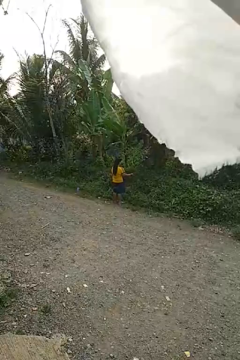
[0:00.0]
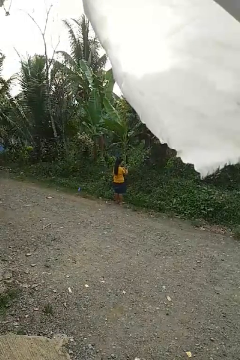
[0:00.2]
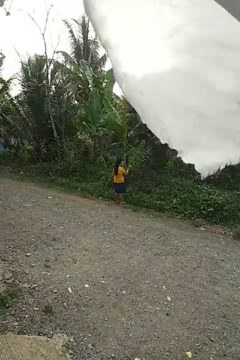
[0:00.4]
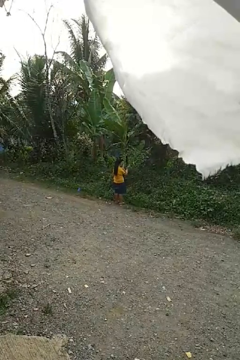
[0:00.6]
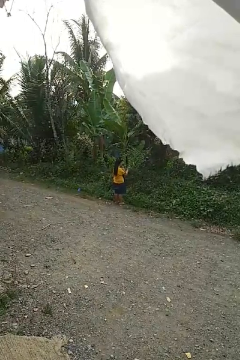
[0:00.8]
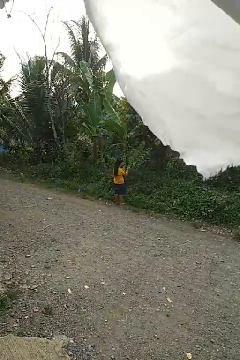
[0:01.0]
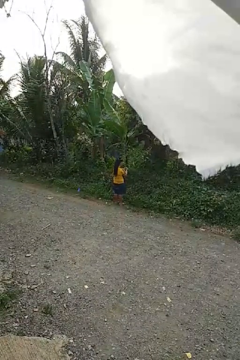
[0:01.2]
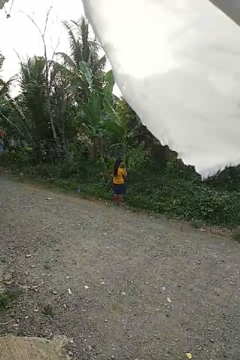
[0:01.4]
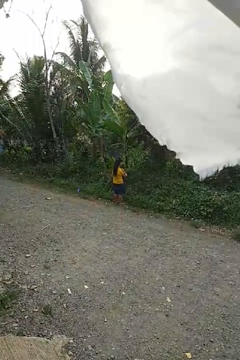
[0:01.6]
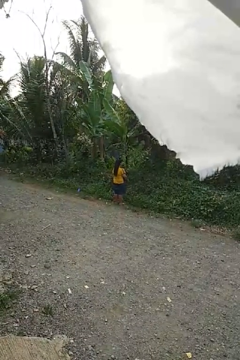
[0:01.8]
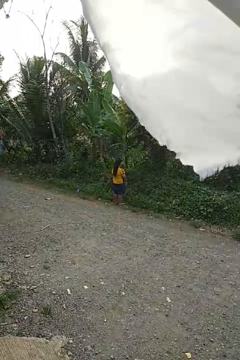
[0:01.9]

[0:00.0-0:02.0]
person claps hands

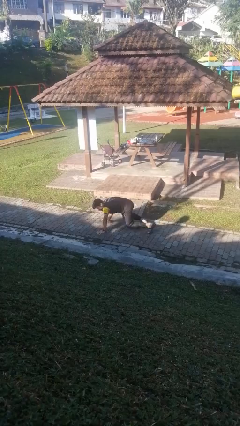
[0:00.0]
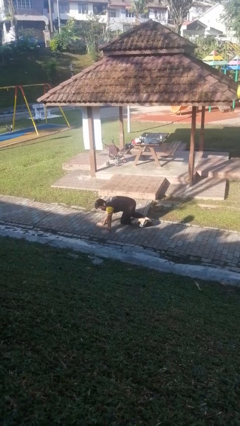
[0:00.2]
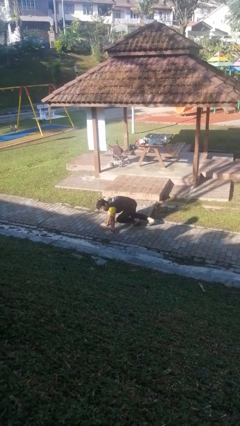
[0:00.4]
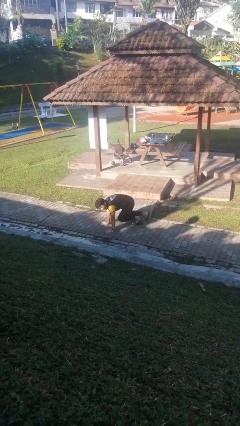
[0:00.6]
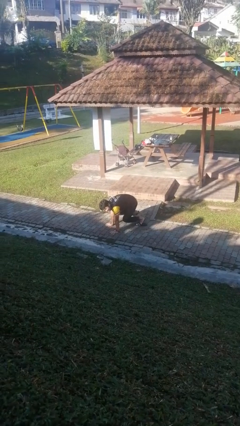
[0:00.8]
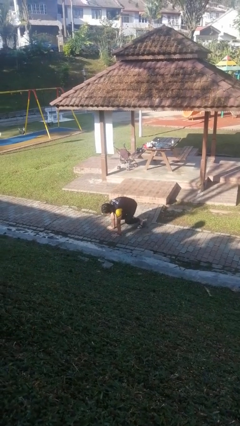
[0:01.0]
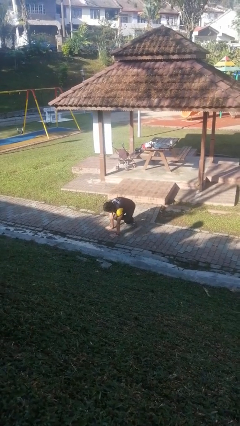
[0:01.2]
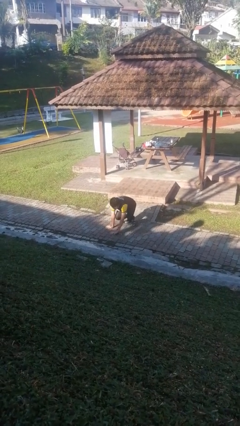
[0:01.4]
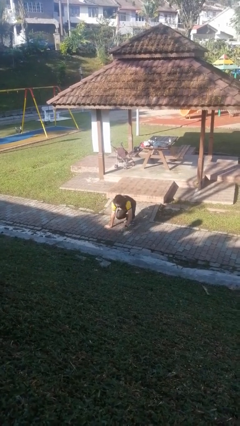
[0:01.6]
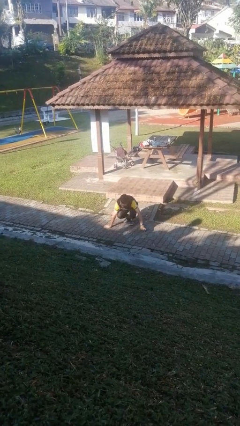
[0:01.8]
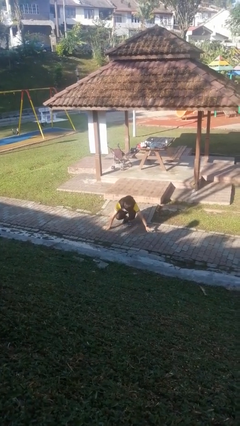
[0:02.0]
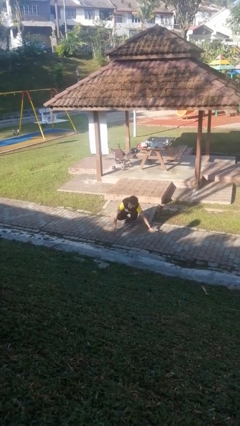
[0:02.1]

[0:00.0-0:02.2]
person crawls

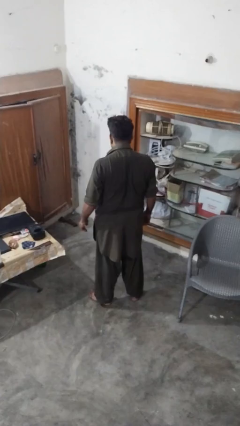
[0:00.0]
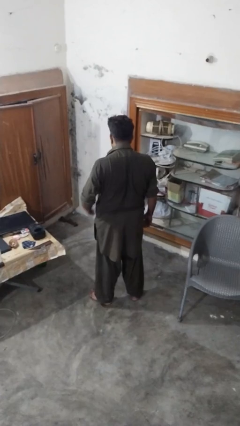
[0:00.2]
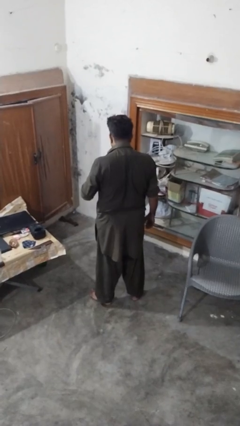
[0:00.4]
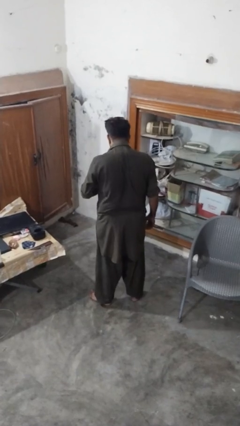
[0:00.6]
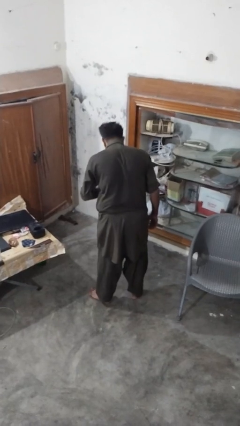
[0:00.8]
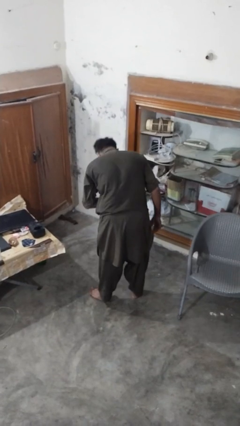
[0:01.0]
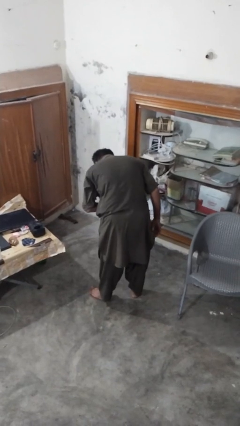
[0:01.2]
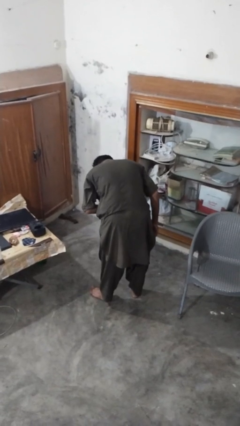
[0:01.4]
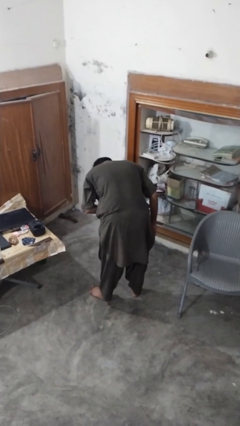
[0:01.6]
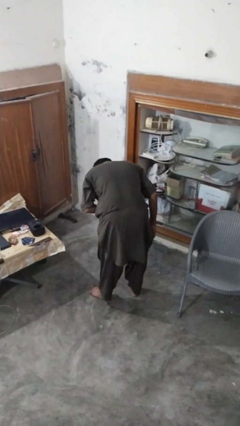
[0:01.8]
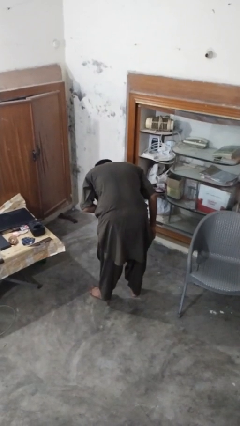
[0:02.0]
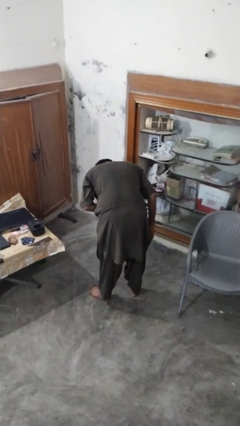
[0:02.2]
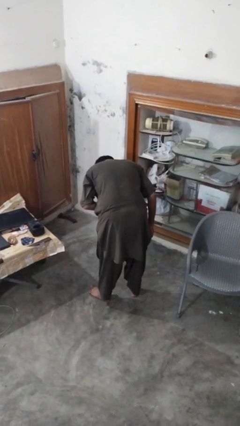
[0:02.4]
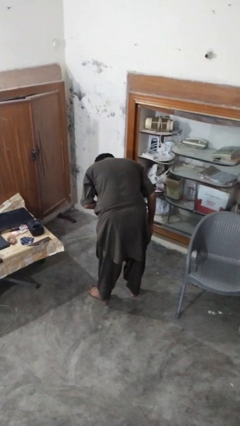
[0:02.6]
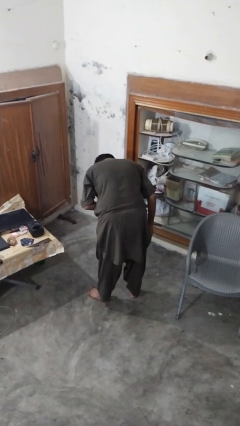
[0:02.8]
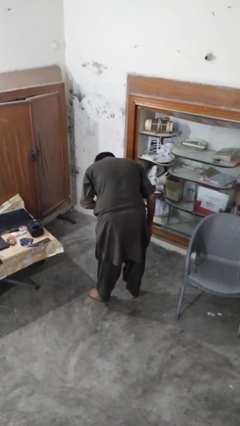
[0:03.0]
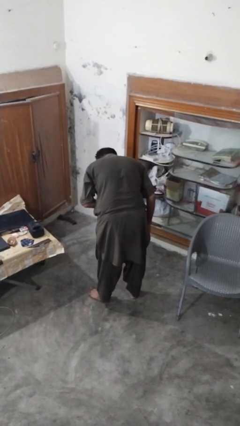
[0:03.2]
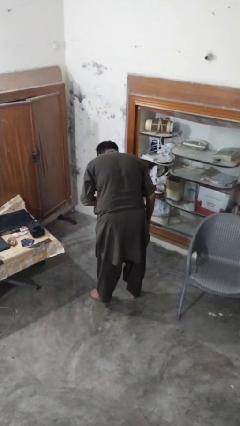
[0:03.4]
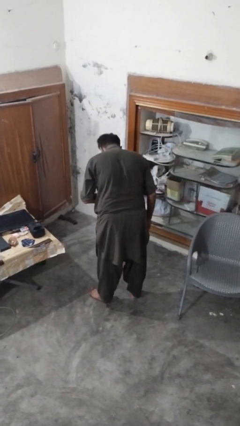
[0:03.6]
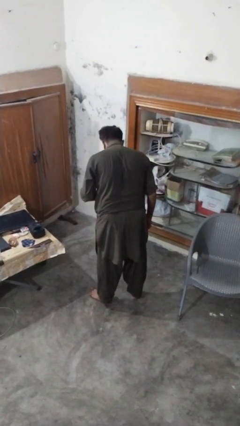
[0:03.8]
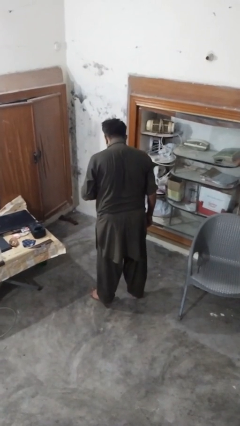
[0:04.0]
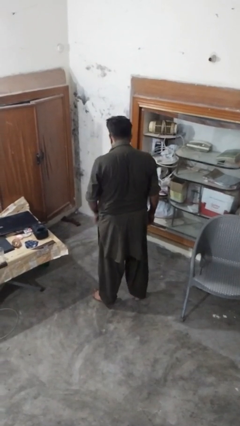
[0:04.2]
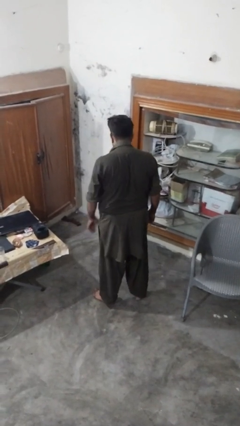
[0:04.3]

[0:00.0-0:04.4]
person bows

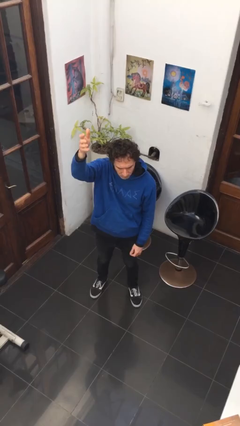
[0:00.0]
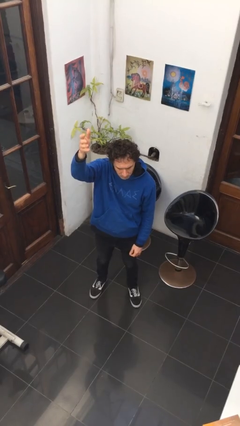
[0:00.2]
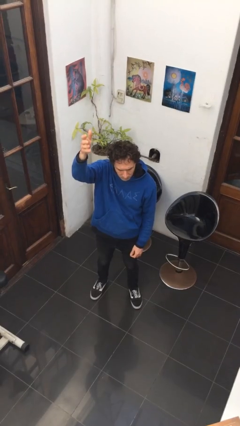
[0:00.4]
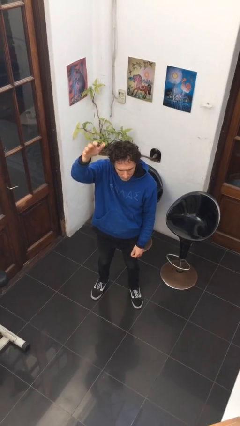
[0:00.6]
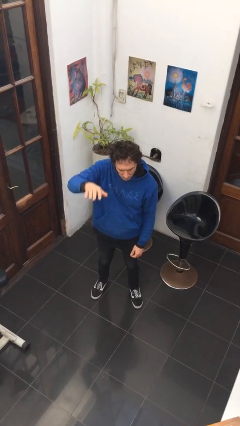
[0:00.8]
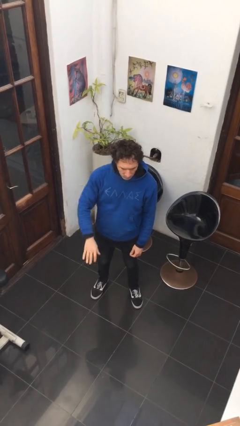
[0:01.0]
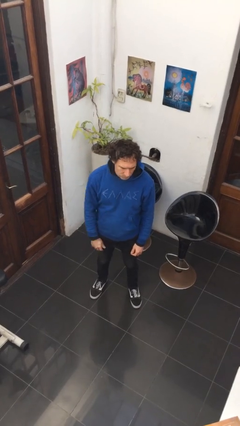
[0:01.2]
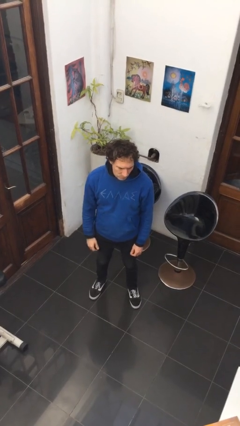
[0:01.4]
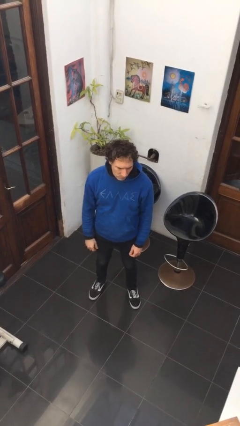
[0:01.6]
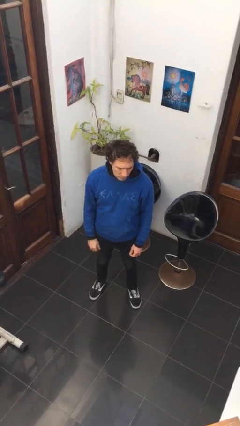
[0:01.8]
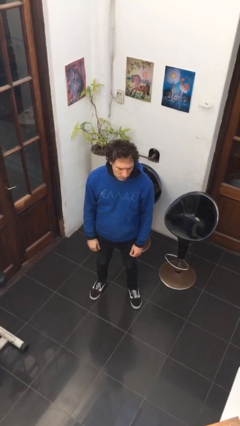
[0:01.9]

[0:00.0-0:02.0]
person gestures swipe down

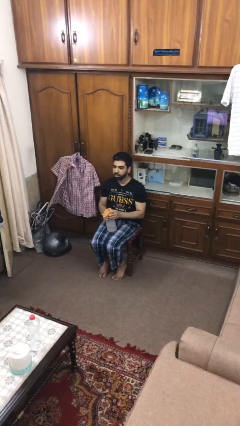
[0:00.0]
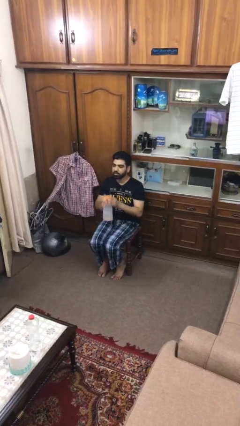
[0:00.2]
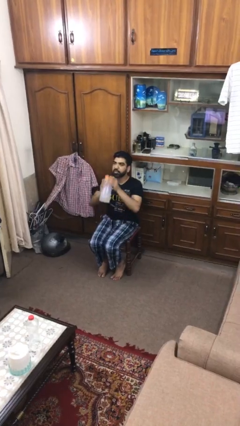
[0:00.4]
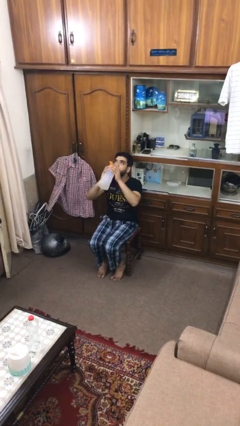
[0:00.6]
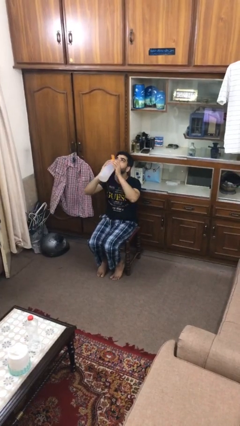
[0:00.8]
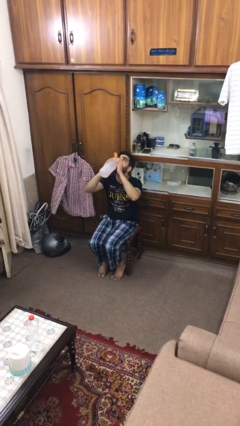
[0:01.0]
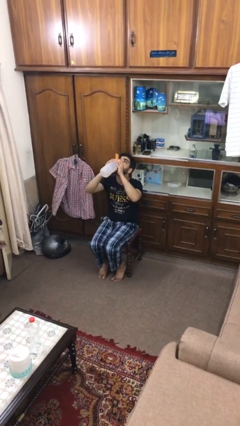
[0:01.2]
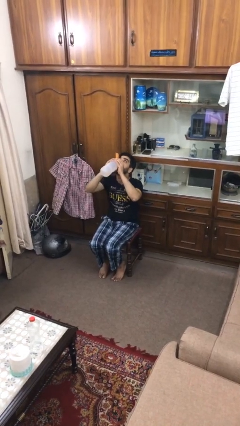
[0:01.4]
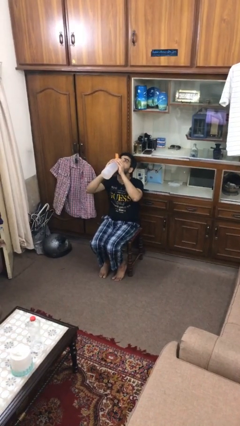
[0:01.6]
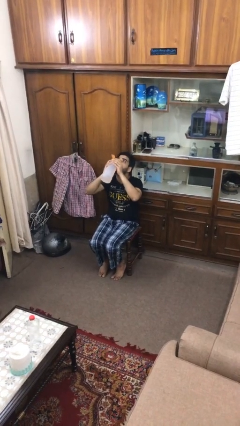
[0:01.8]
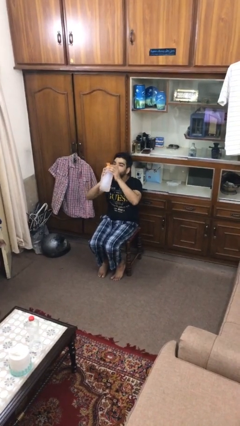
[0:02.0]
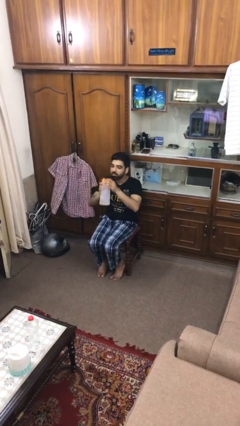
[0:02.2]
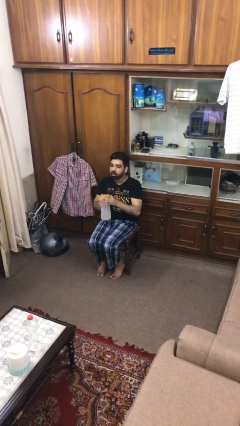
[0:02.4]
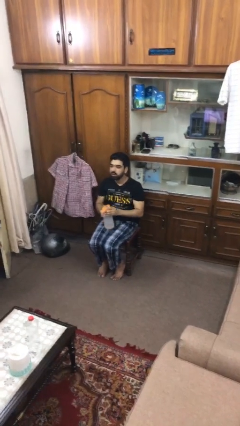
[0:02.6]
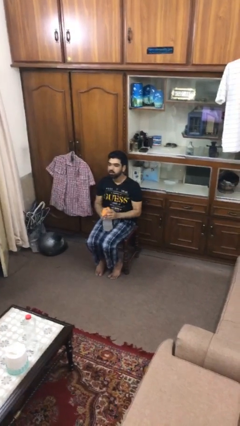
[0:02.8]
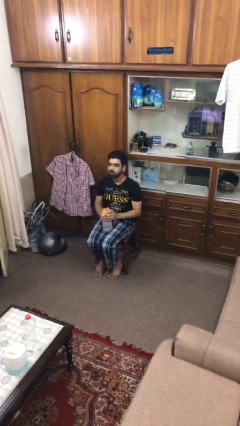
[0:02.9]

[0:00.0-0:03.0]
person drinks from bottle

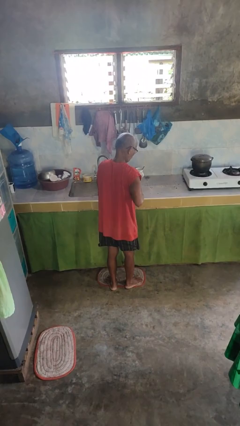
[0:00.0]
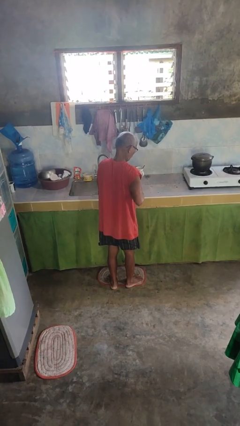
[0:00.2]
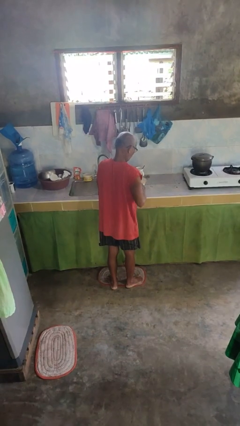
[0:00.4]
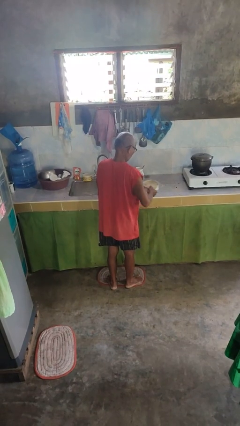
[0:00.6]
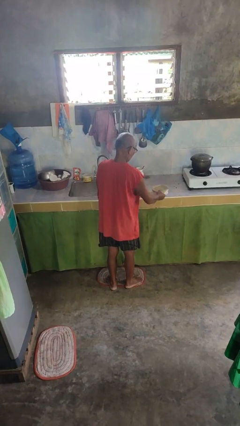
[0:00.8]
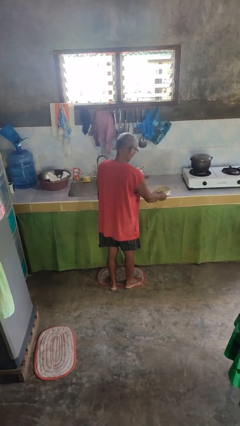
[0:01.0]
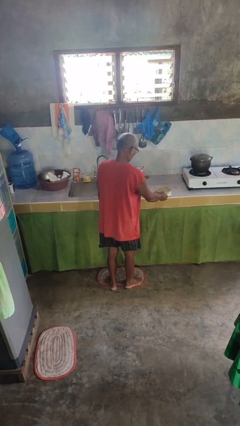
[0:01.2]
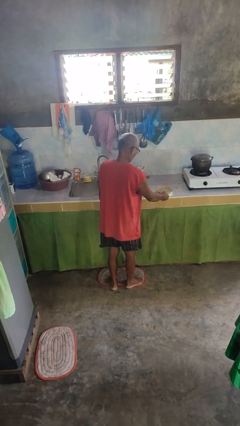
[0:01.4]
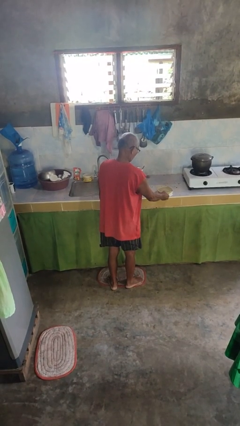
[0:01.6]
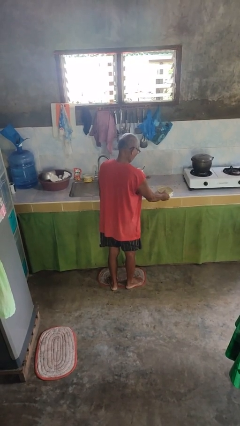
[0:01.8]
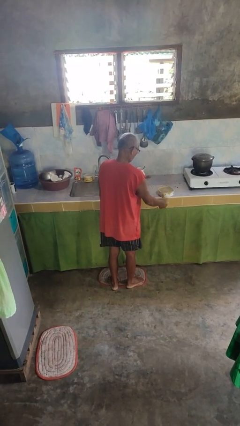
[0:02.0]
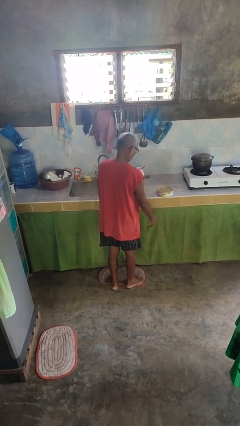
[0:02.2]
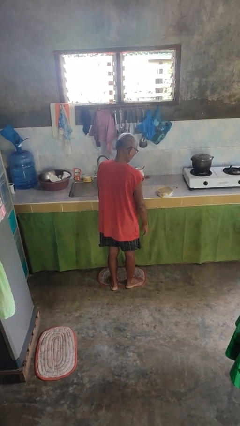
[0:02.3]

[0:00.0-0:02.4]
person puts down object on countertop

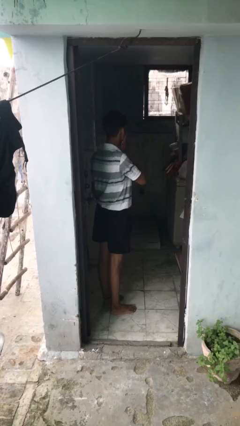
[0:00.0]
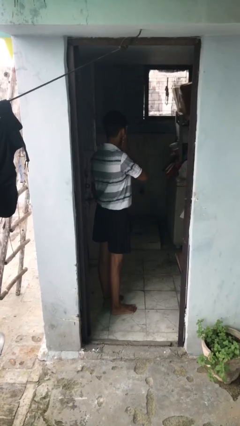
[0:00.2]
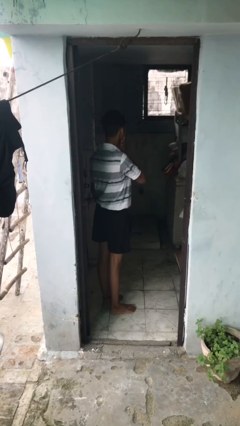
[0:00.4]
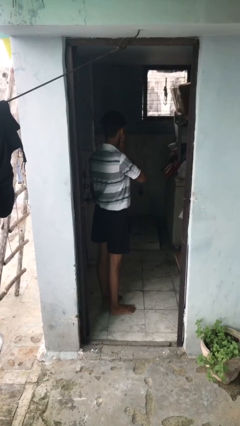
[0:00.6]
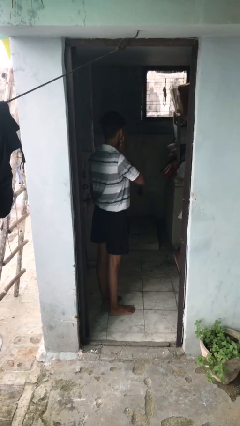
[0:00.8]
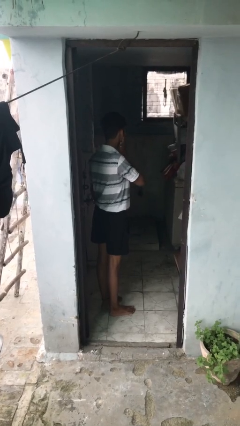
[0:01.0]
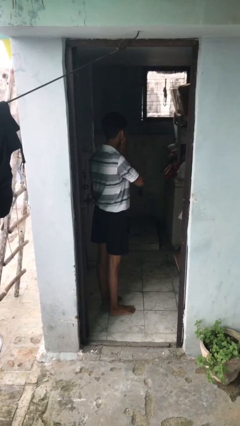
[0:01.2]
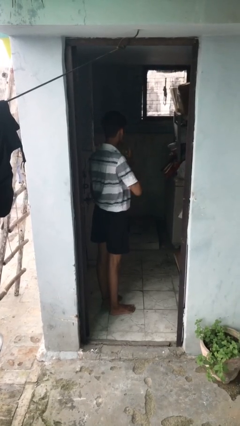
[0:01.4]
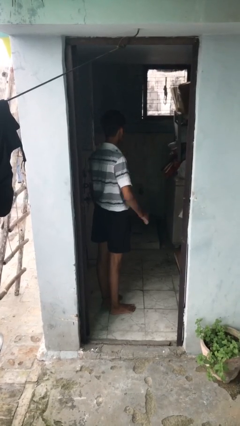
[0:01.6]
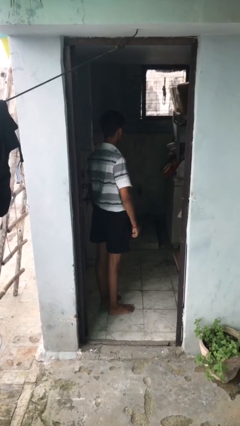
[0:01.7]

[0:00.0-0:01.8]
person applies shaving cream
